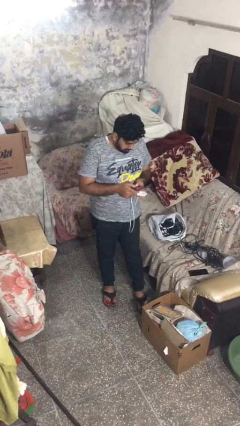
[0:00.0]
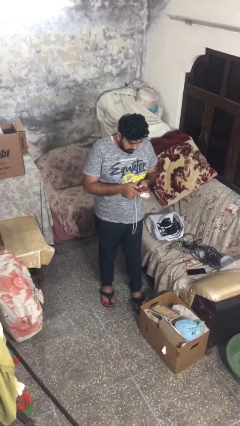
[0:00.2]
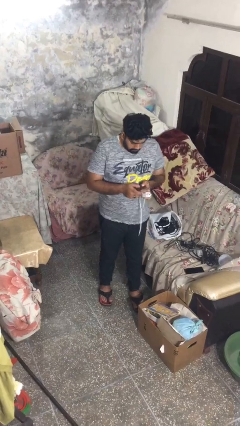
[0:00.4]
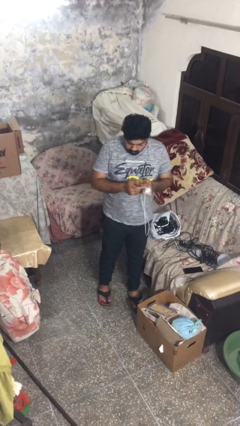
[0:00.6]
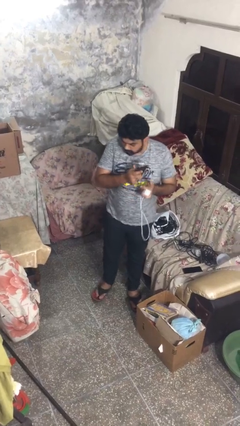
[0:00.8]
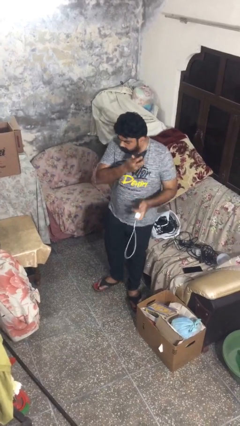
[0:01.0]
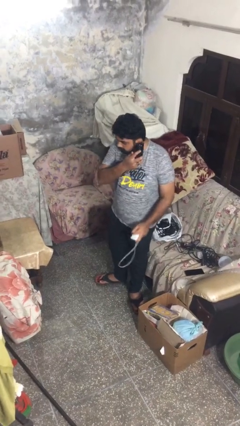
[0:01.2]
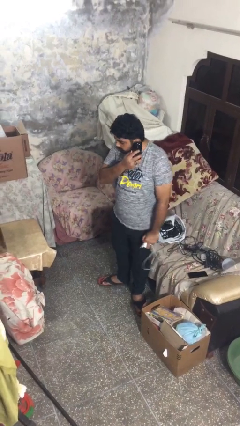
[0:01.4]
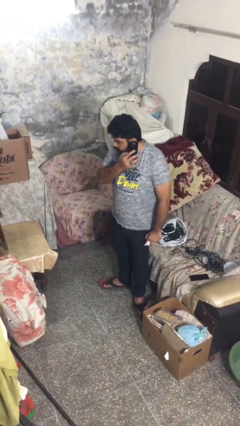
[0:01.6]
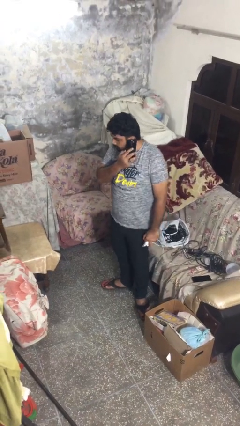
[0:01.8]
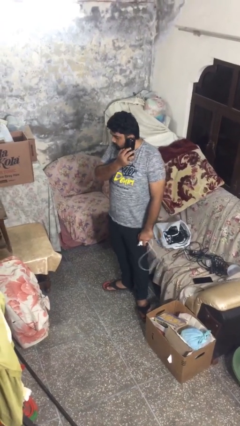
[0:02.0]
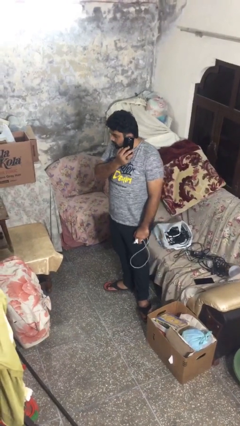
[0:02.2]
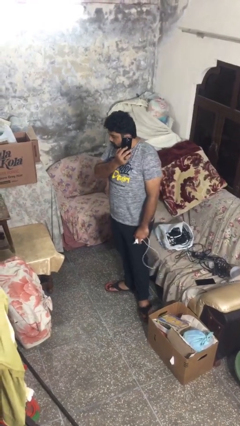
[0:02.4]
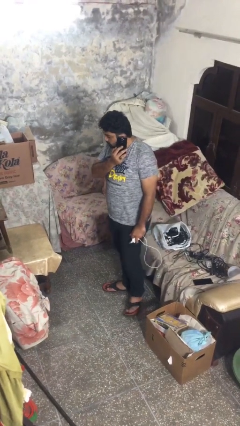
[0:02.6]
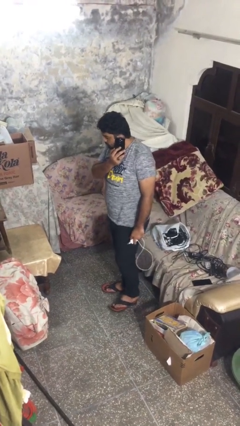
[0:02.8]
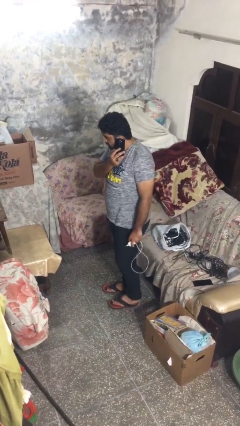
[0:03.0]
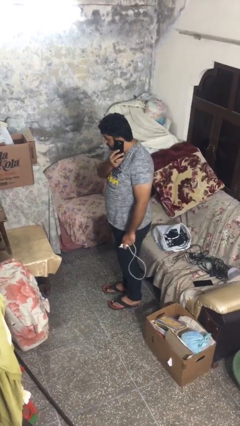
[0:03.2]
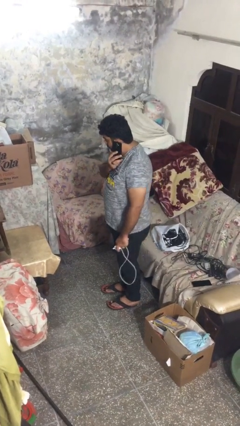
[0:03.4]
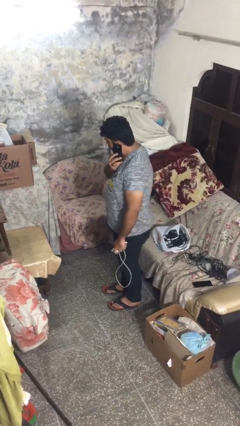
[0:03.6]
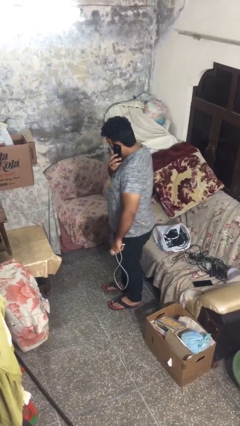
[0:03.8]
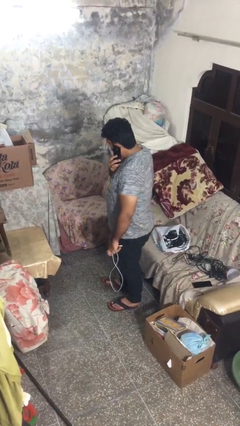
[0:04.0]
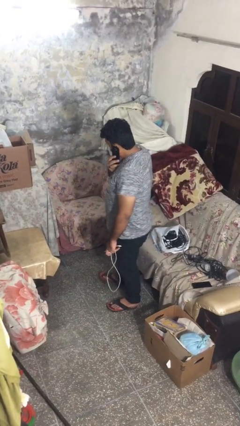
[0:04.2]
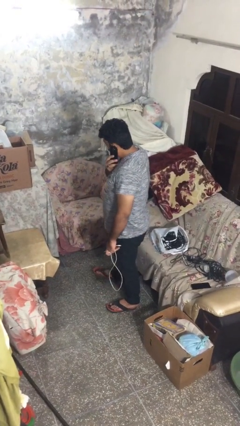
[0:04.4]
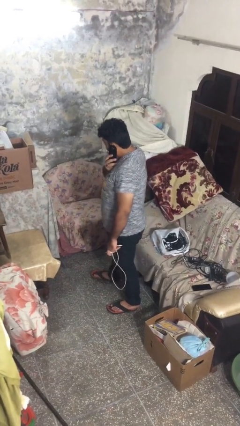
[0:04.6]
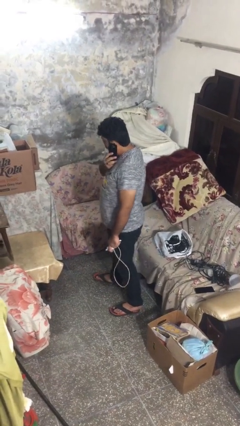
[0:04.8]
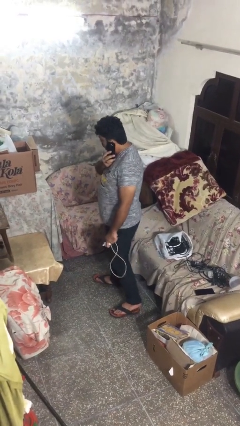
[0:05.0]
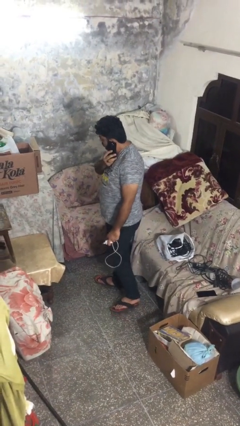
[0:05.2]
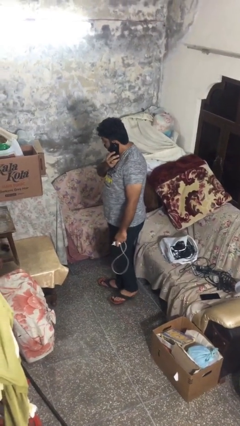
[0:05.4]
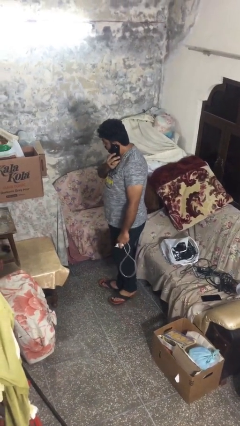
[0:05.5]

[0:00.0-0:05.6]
person talks on phone

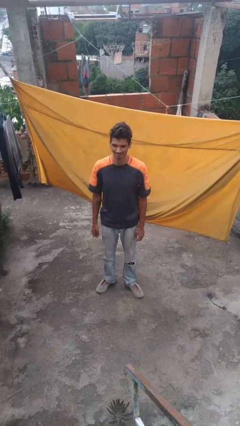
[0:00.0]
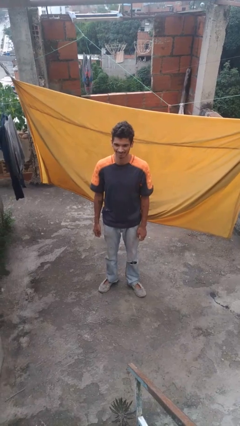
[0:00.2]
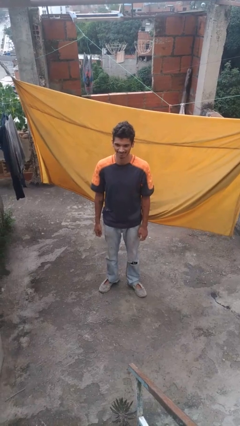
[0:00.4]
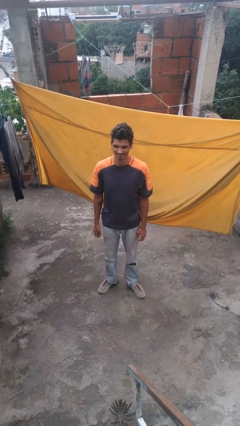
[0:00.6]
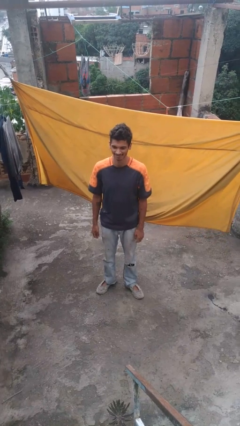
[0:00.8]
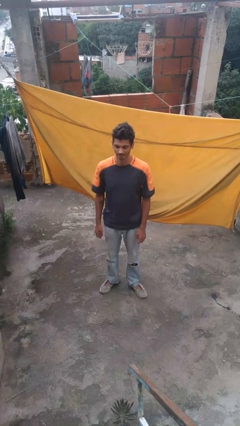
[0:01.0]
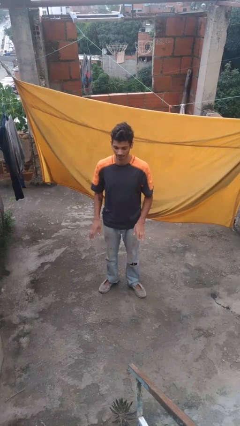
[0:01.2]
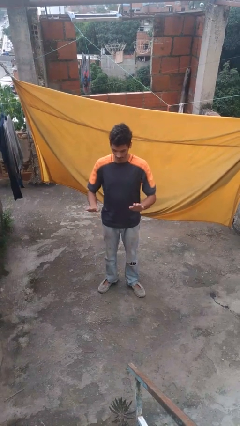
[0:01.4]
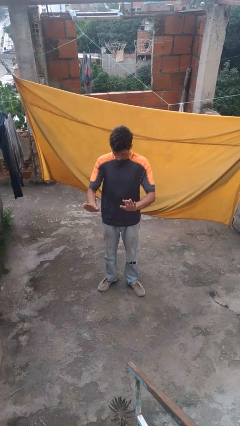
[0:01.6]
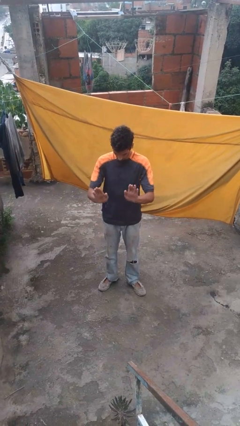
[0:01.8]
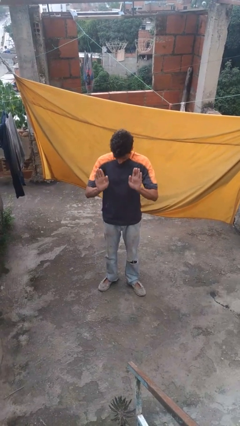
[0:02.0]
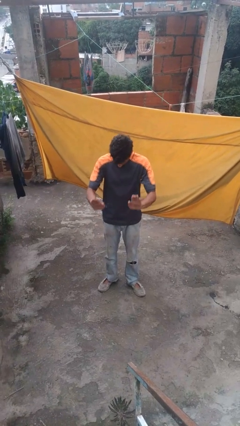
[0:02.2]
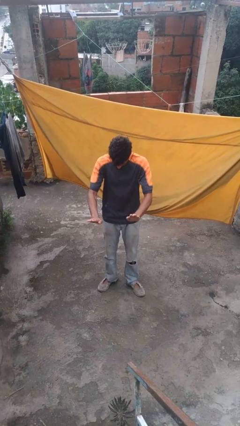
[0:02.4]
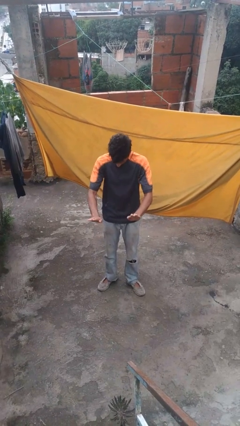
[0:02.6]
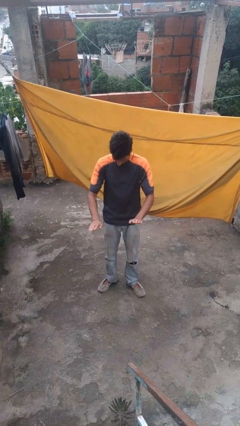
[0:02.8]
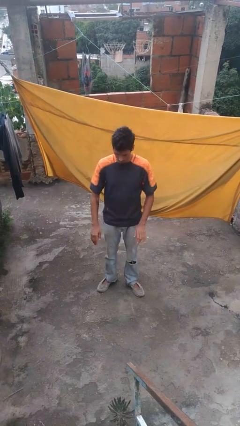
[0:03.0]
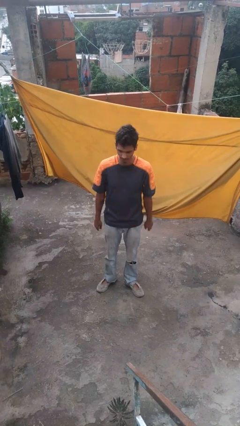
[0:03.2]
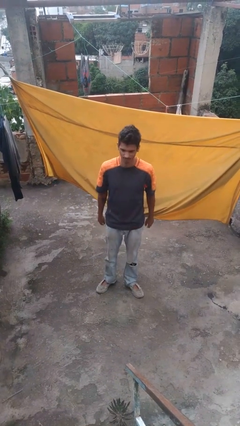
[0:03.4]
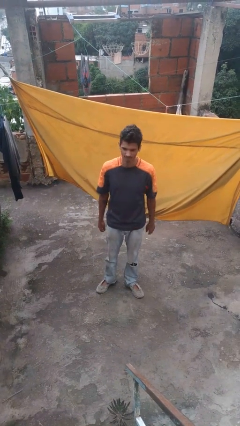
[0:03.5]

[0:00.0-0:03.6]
person gestures stop

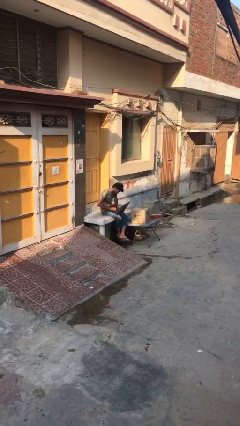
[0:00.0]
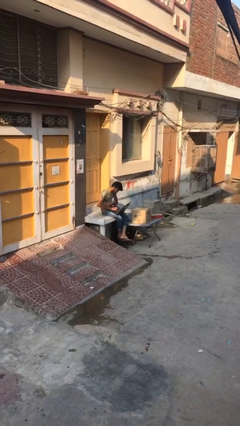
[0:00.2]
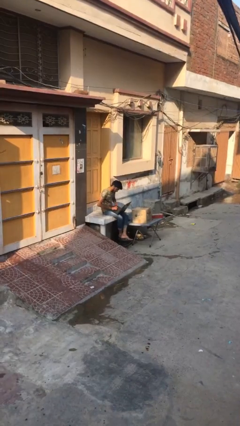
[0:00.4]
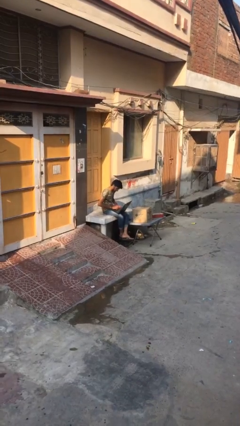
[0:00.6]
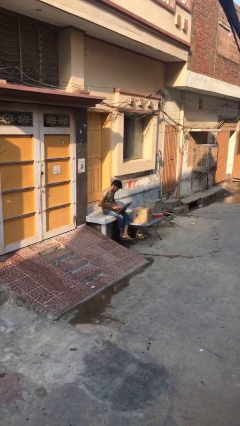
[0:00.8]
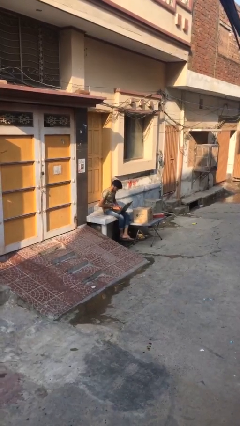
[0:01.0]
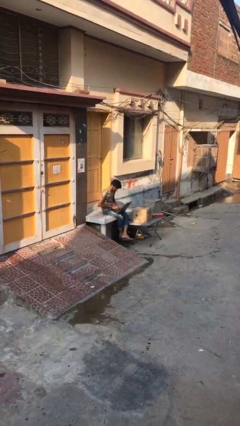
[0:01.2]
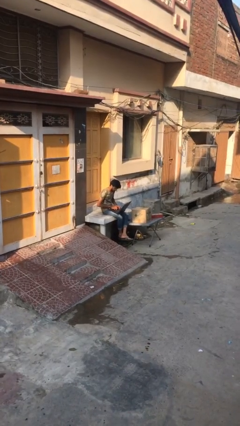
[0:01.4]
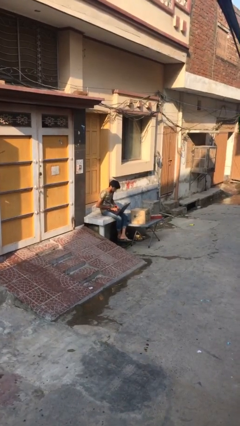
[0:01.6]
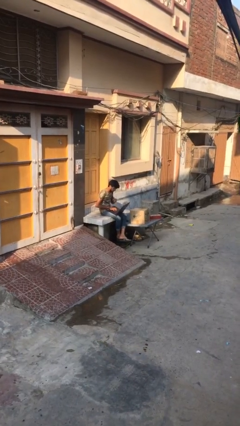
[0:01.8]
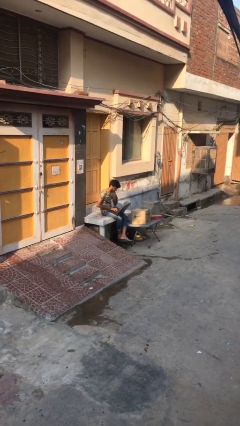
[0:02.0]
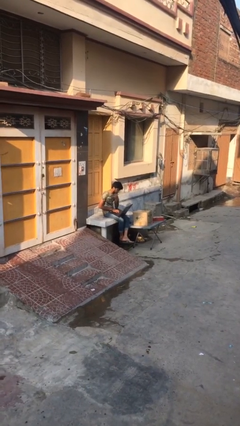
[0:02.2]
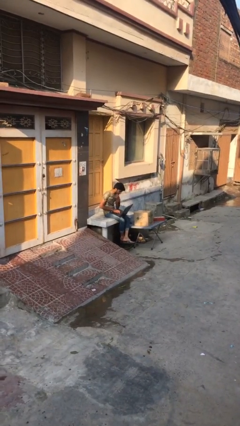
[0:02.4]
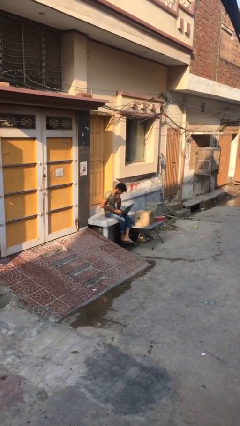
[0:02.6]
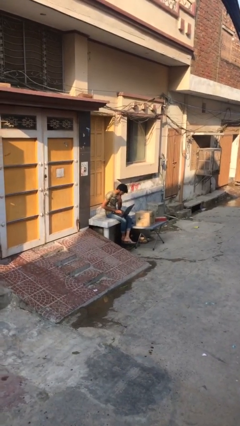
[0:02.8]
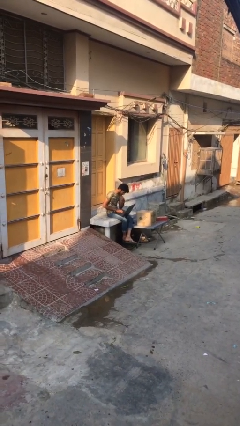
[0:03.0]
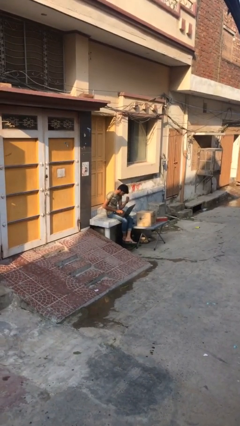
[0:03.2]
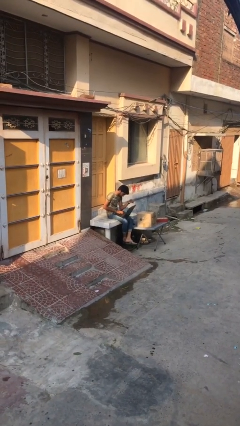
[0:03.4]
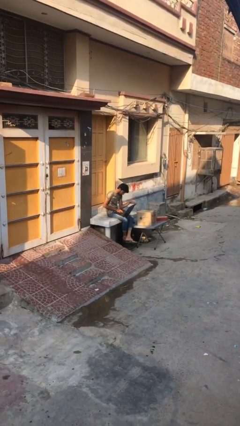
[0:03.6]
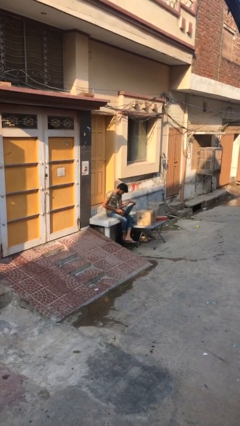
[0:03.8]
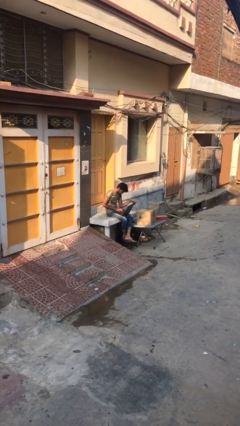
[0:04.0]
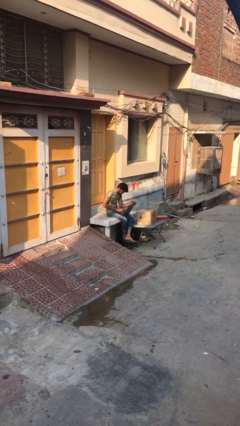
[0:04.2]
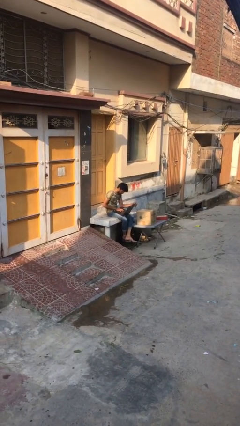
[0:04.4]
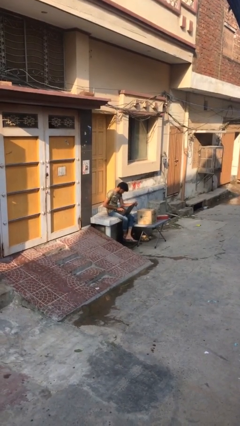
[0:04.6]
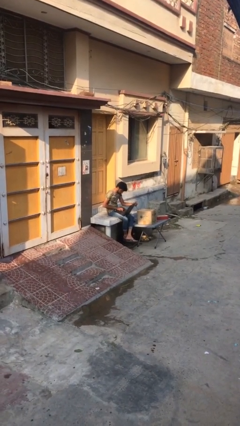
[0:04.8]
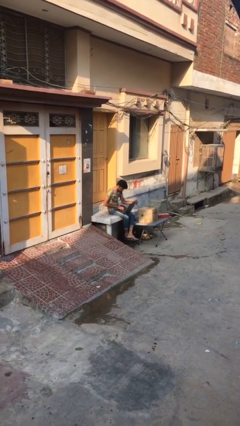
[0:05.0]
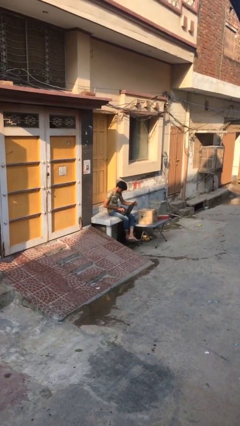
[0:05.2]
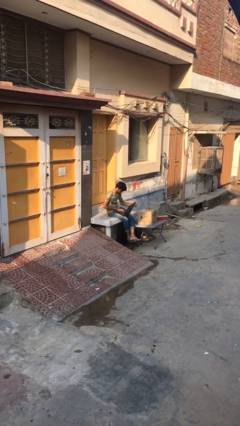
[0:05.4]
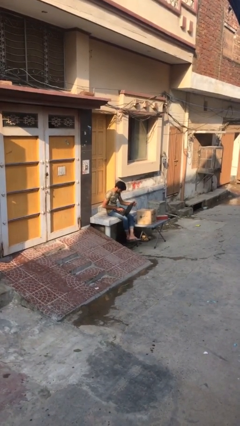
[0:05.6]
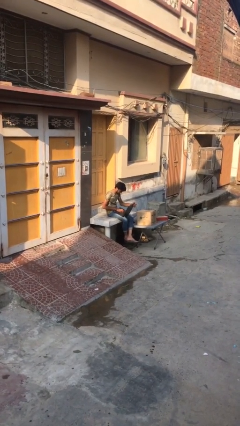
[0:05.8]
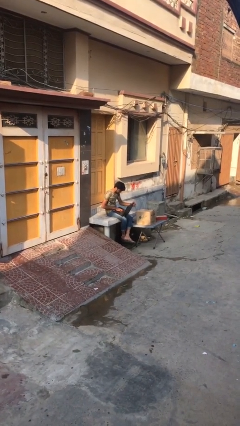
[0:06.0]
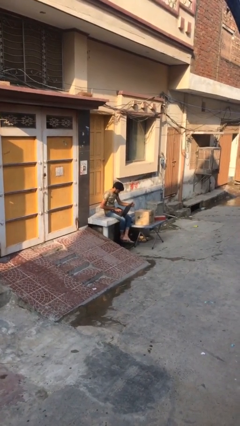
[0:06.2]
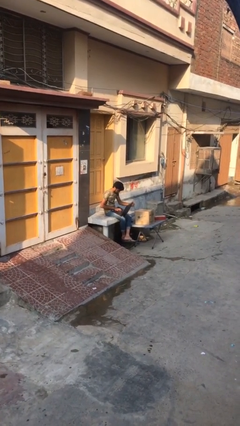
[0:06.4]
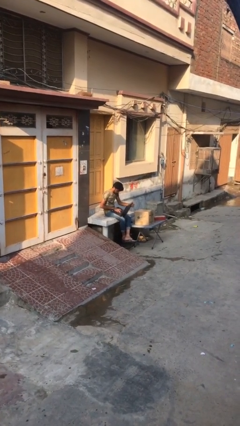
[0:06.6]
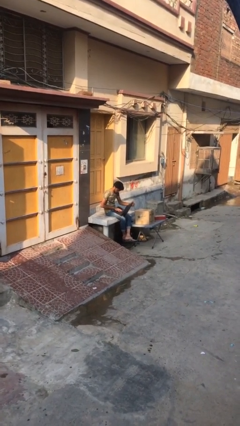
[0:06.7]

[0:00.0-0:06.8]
person interacts with laptop

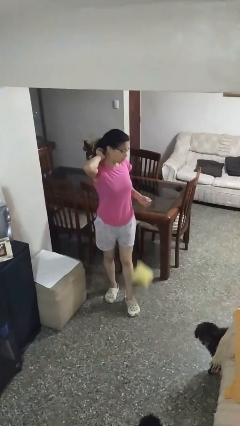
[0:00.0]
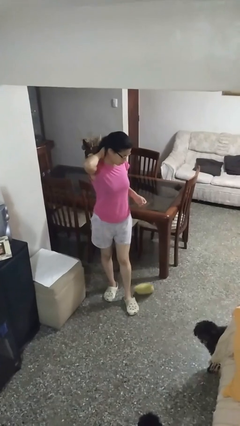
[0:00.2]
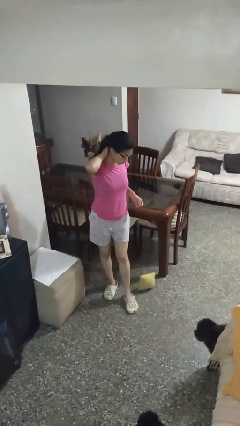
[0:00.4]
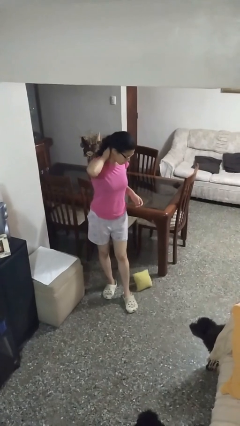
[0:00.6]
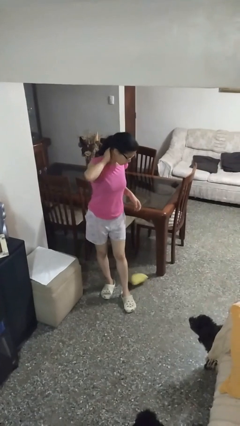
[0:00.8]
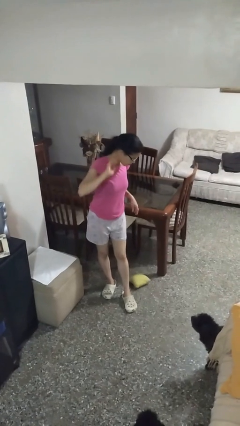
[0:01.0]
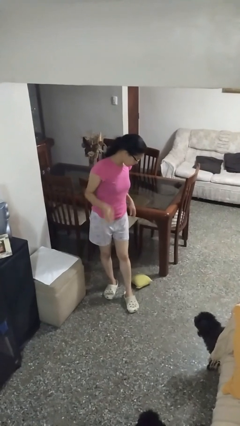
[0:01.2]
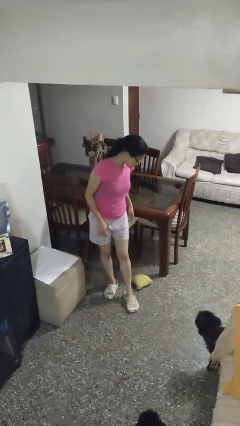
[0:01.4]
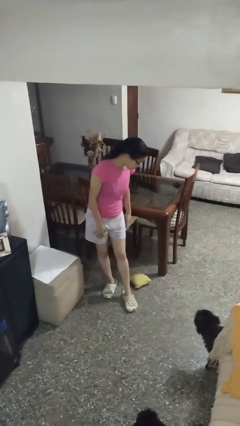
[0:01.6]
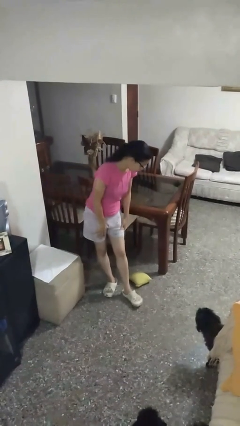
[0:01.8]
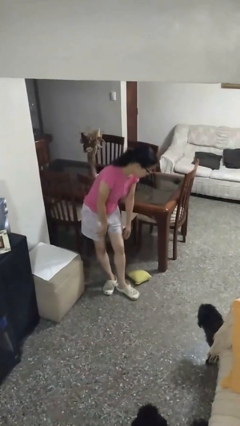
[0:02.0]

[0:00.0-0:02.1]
person drops object
